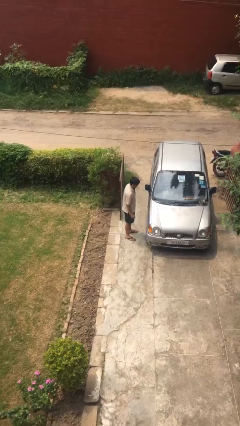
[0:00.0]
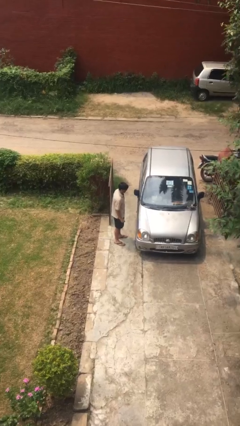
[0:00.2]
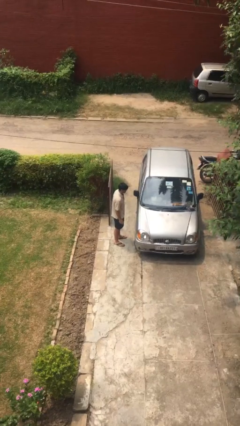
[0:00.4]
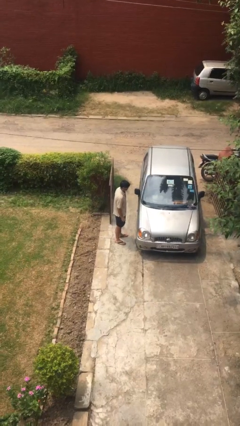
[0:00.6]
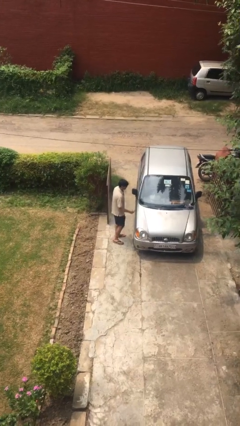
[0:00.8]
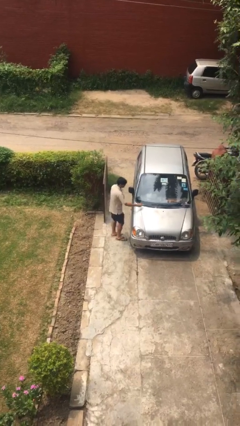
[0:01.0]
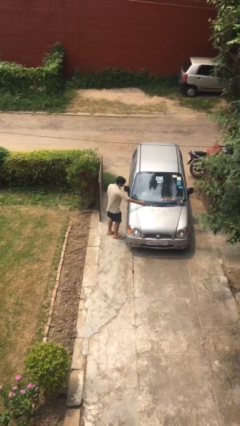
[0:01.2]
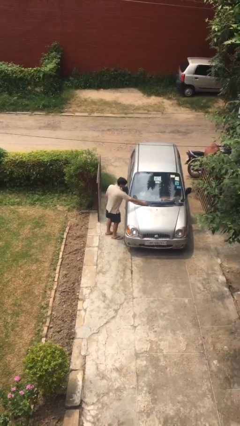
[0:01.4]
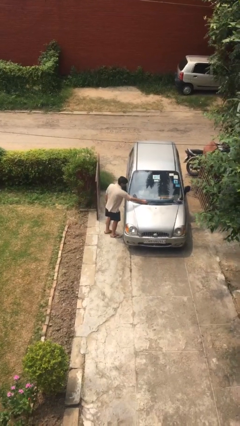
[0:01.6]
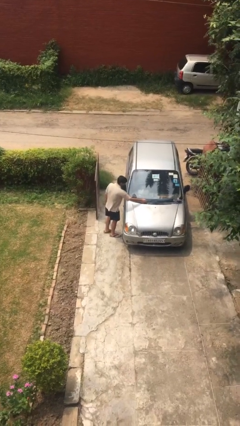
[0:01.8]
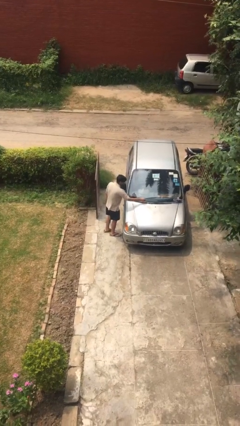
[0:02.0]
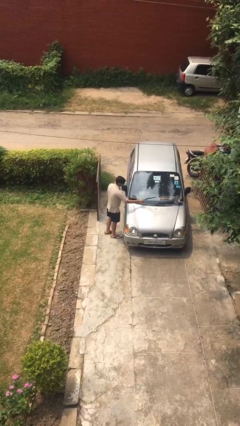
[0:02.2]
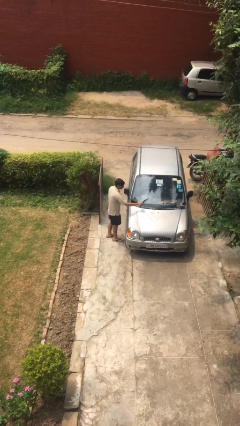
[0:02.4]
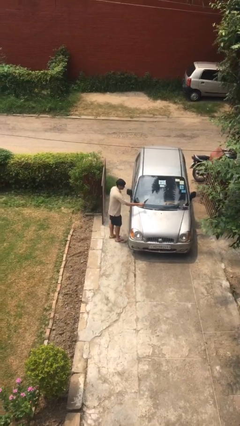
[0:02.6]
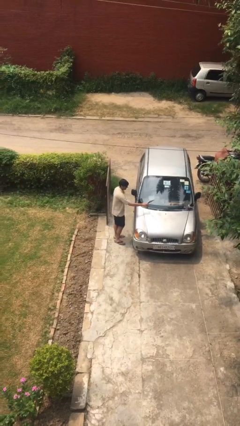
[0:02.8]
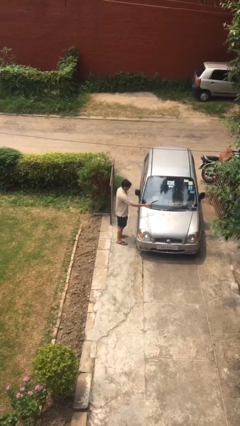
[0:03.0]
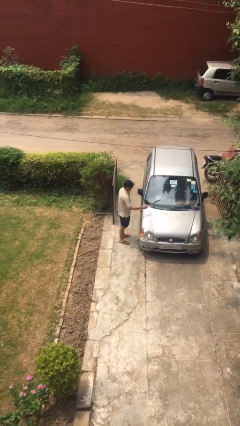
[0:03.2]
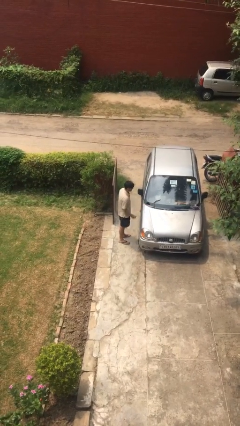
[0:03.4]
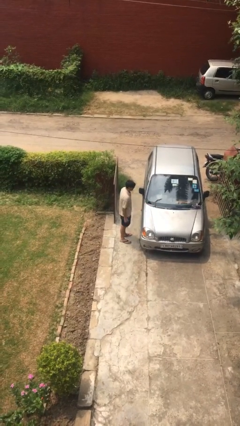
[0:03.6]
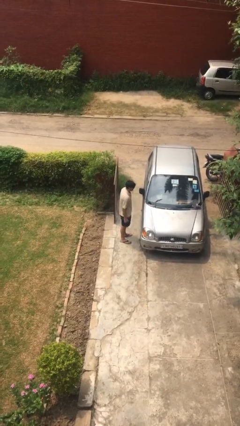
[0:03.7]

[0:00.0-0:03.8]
person flips up car wipers

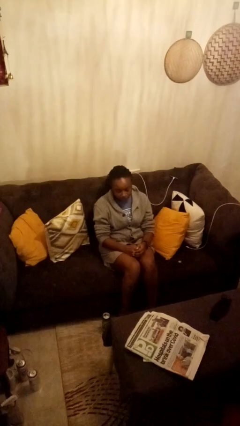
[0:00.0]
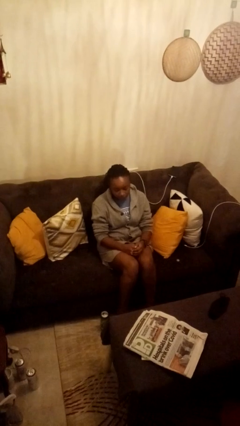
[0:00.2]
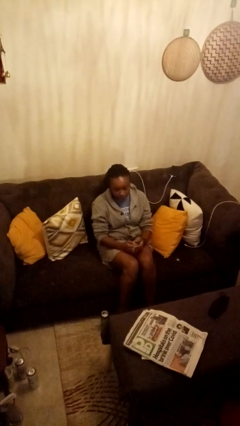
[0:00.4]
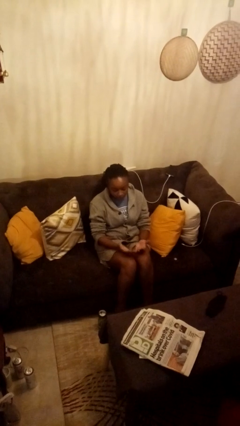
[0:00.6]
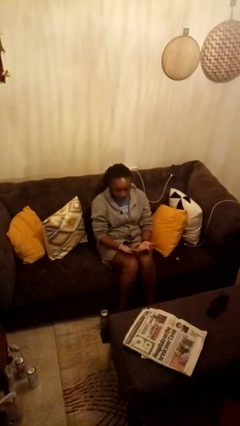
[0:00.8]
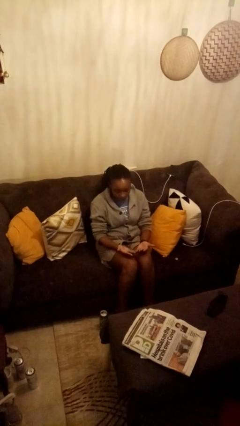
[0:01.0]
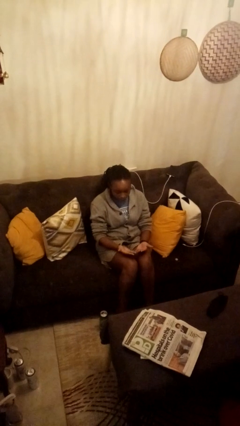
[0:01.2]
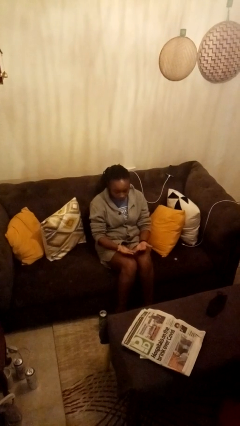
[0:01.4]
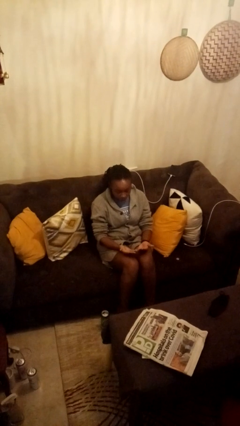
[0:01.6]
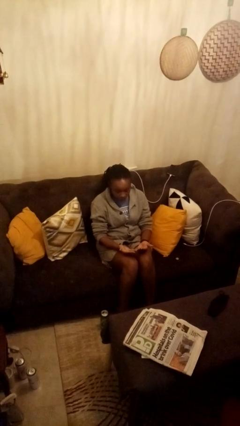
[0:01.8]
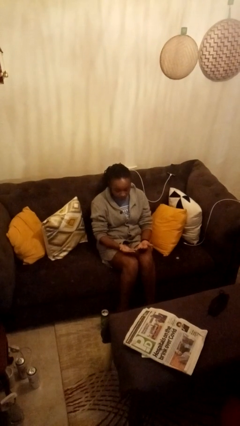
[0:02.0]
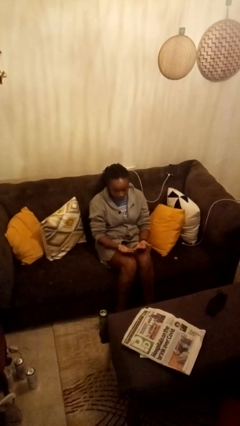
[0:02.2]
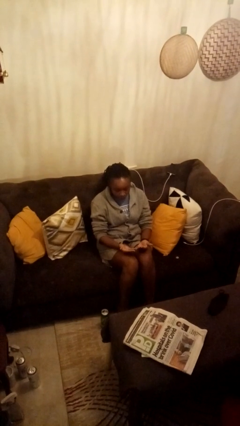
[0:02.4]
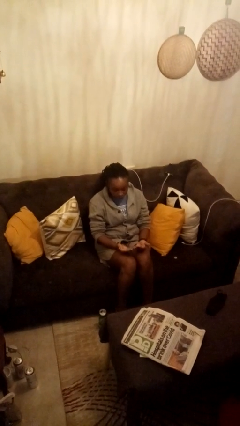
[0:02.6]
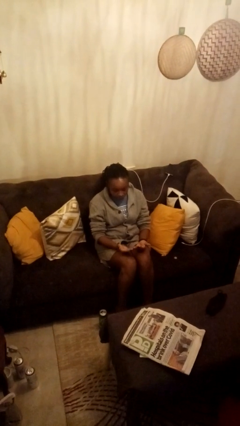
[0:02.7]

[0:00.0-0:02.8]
person looks at hands in lap

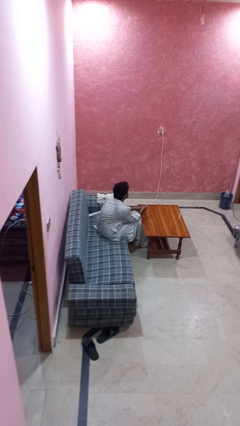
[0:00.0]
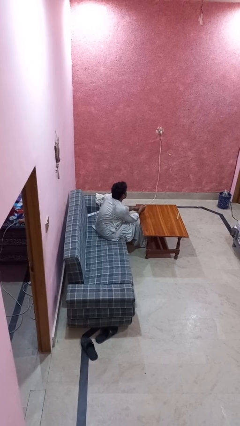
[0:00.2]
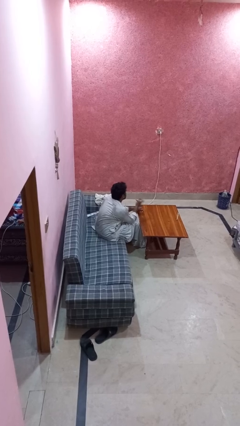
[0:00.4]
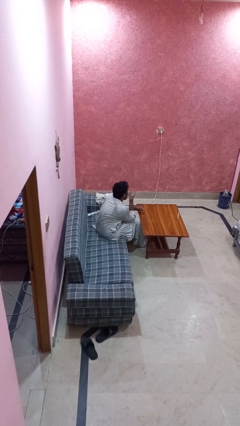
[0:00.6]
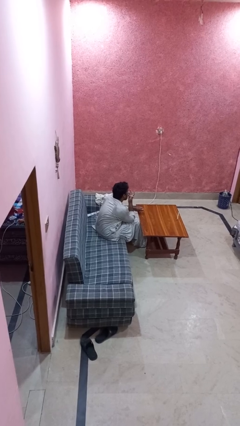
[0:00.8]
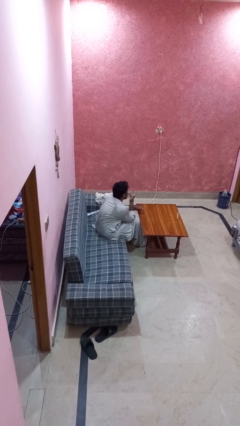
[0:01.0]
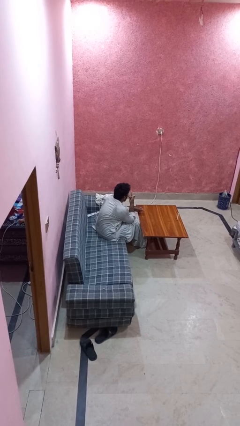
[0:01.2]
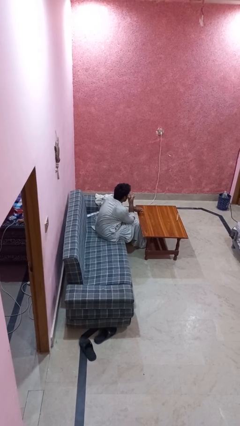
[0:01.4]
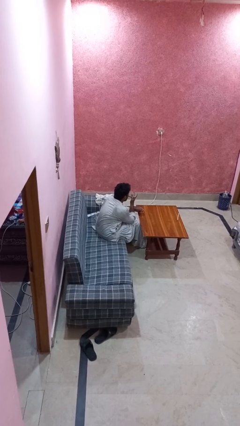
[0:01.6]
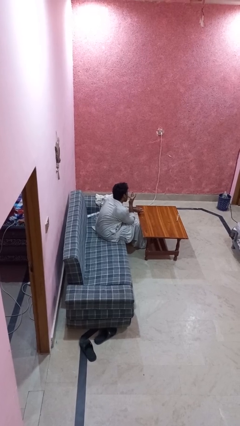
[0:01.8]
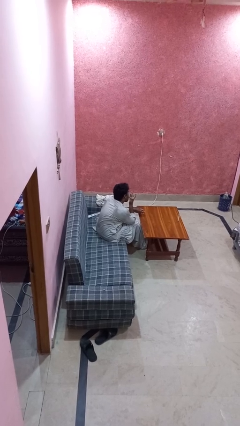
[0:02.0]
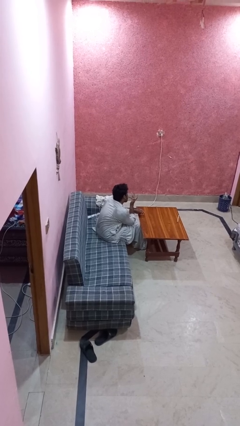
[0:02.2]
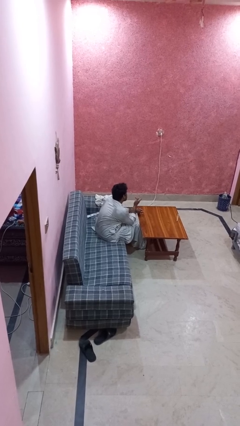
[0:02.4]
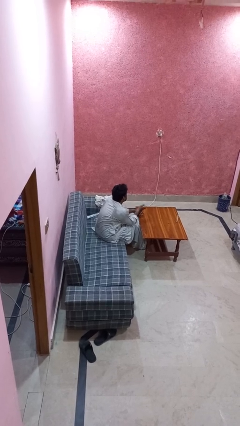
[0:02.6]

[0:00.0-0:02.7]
person licks fingers

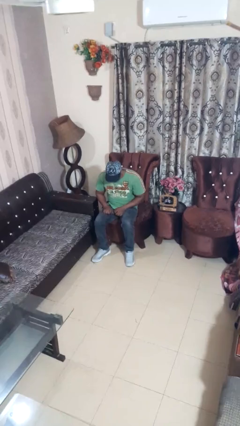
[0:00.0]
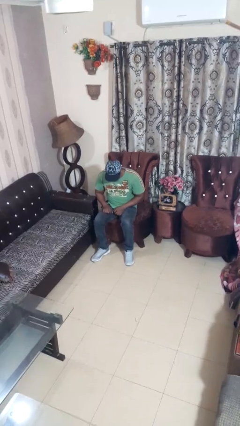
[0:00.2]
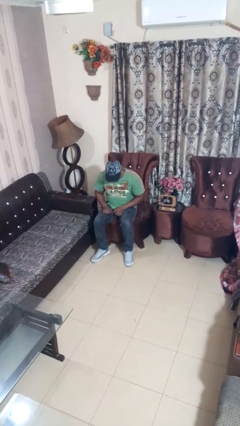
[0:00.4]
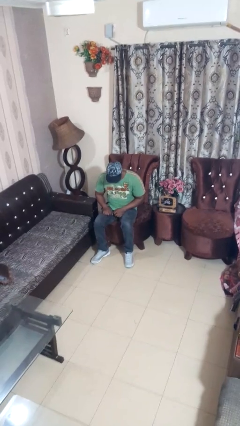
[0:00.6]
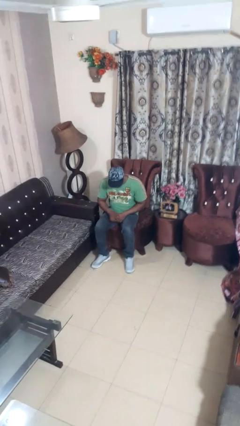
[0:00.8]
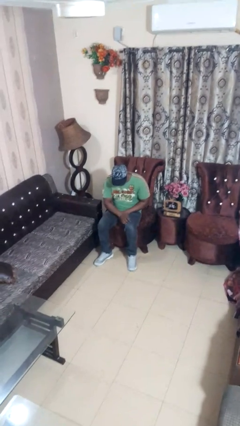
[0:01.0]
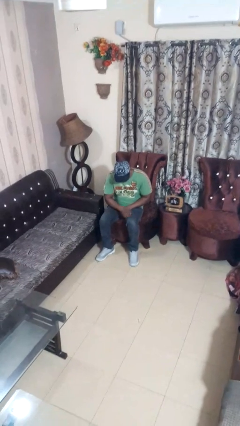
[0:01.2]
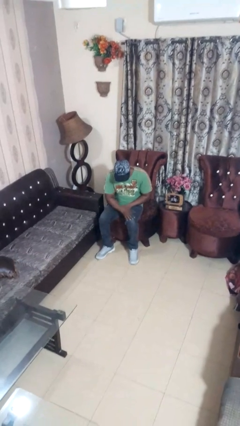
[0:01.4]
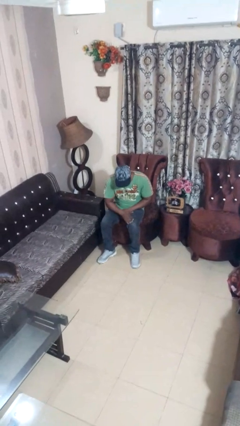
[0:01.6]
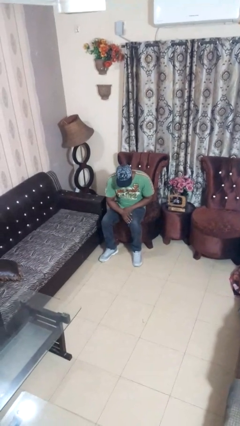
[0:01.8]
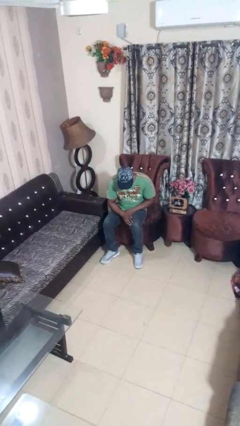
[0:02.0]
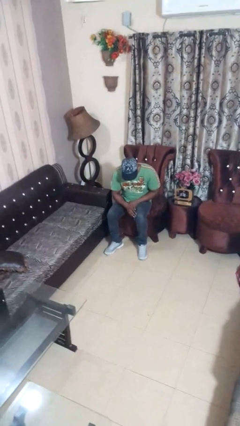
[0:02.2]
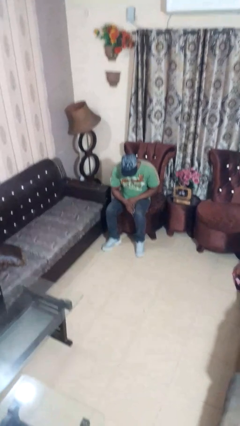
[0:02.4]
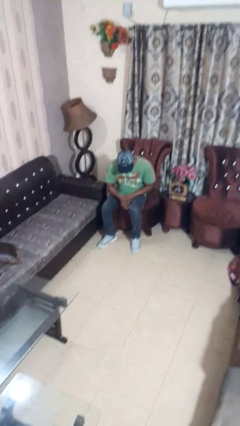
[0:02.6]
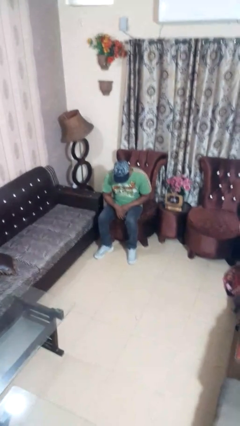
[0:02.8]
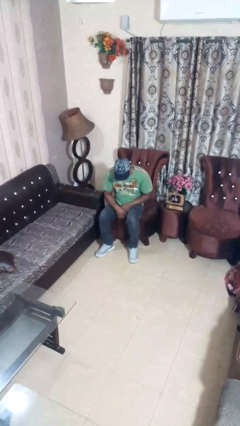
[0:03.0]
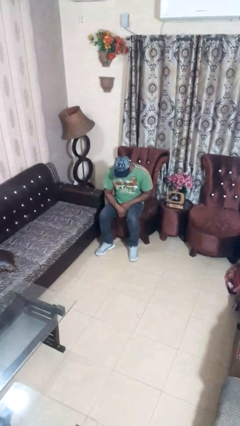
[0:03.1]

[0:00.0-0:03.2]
person swats bug

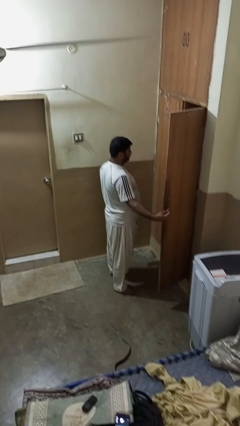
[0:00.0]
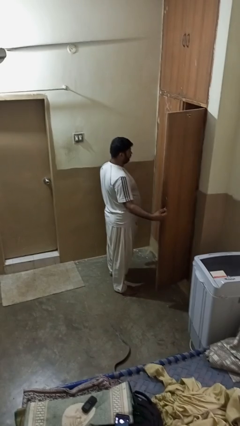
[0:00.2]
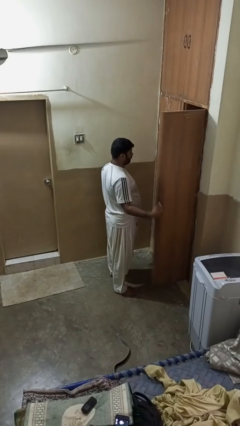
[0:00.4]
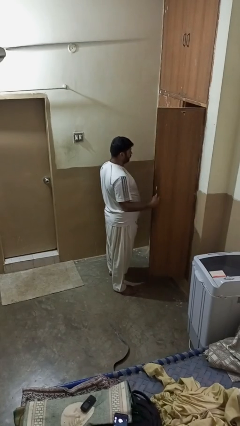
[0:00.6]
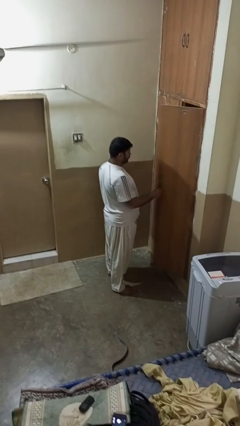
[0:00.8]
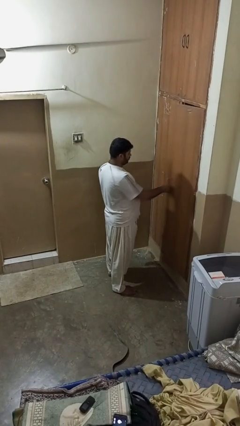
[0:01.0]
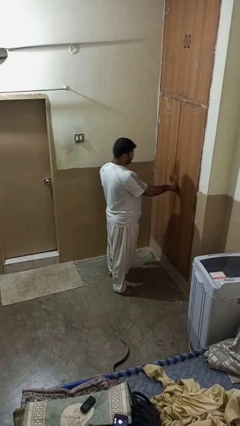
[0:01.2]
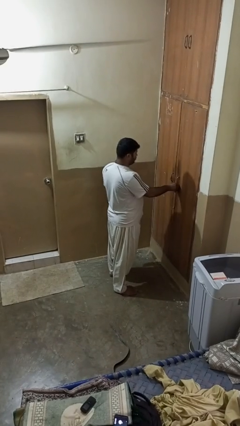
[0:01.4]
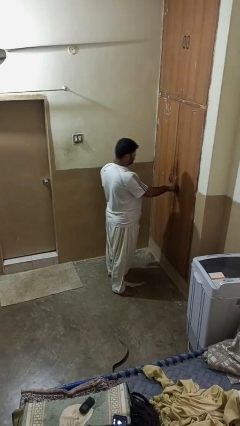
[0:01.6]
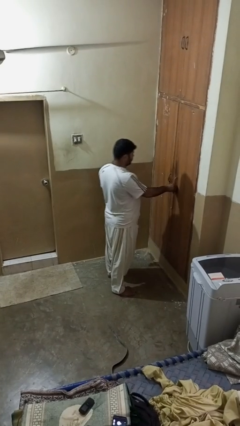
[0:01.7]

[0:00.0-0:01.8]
person closes closet door

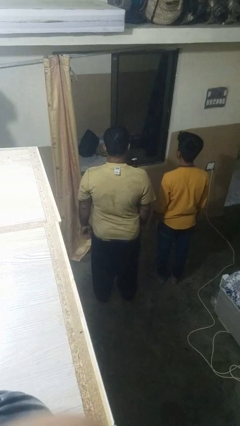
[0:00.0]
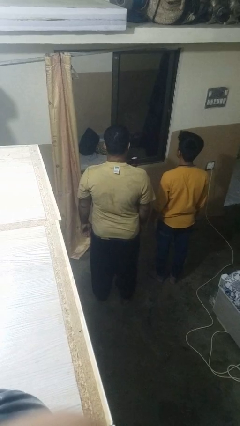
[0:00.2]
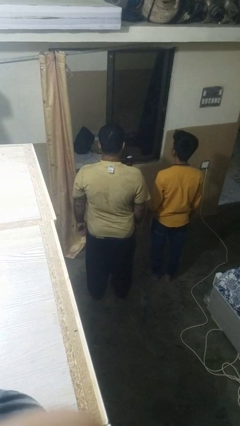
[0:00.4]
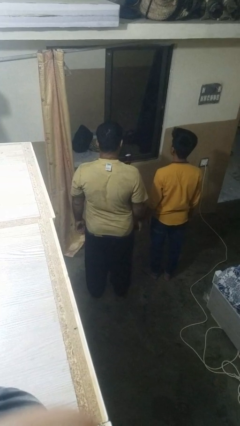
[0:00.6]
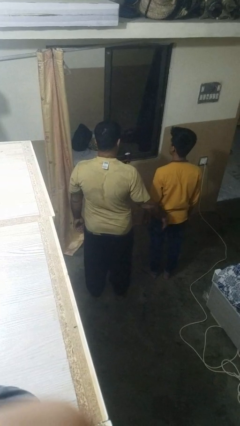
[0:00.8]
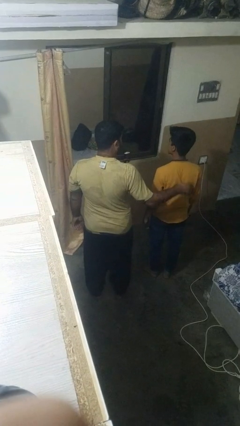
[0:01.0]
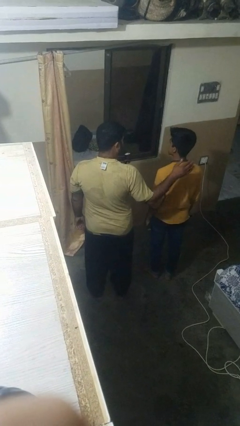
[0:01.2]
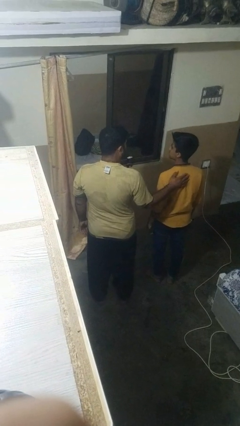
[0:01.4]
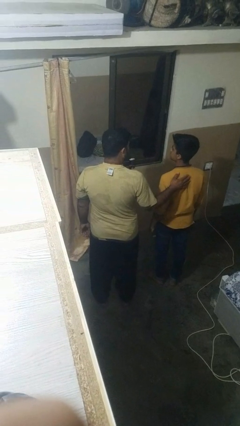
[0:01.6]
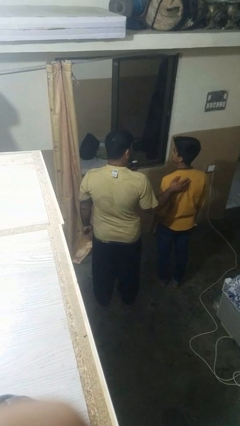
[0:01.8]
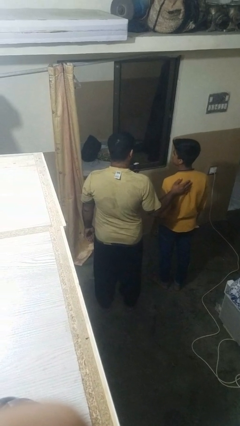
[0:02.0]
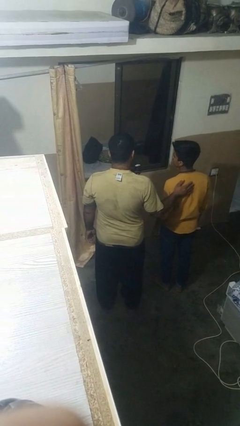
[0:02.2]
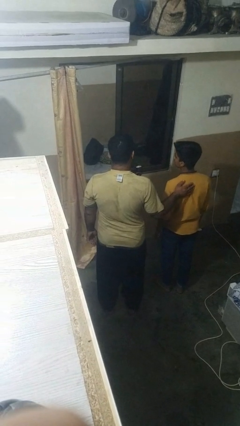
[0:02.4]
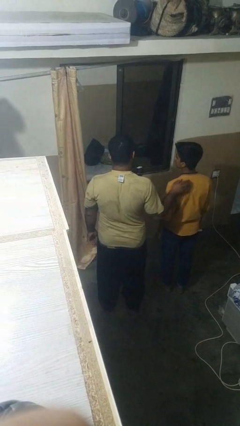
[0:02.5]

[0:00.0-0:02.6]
person touches back of person

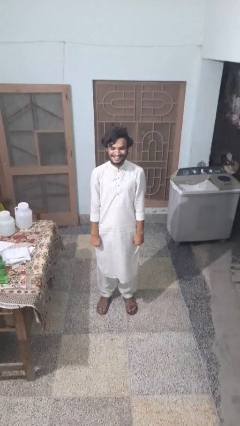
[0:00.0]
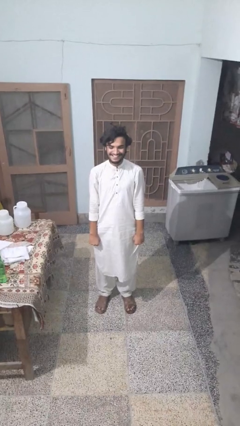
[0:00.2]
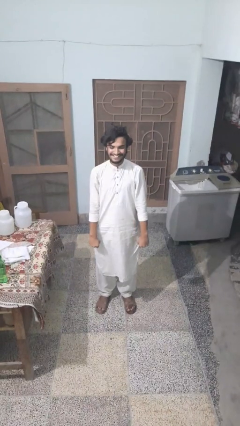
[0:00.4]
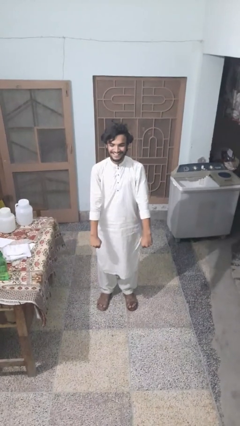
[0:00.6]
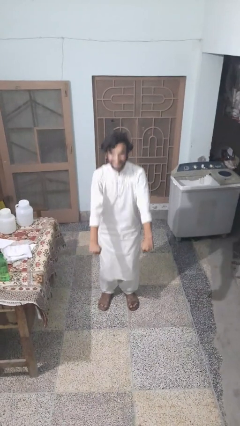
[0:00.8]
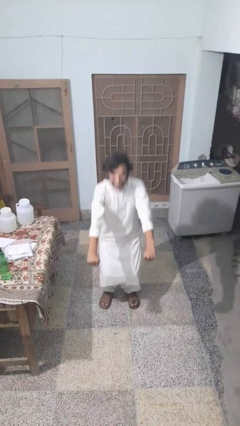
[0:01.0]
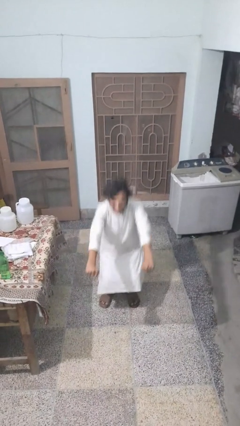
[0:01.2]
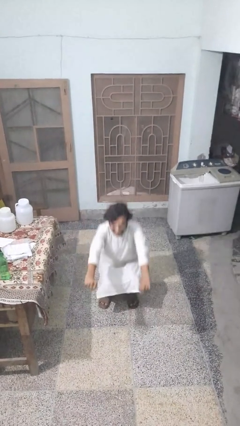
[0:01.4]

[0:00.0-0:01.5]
person squats
